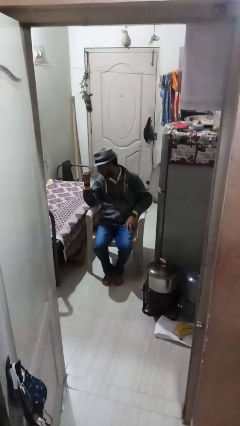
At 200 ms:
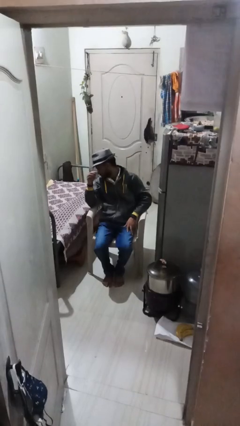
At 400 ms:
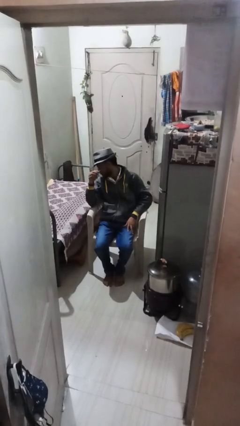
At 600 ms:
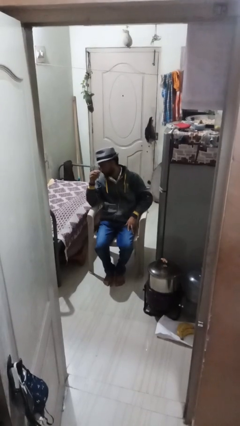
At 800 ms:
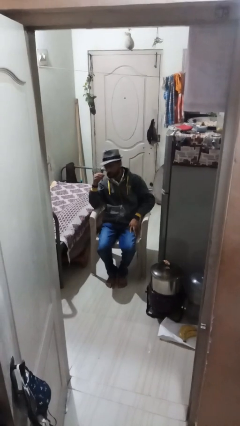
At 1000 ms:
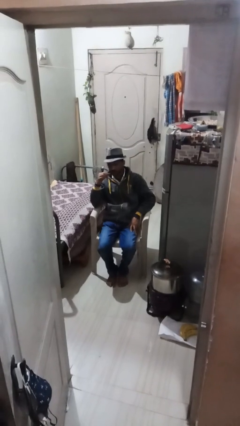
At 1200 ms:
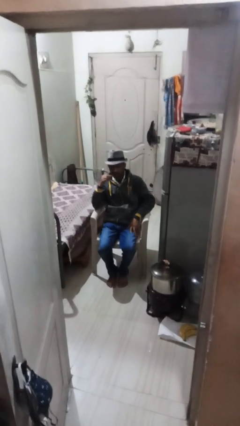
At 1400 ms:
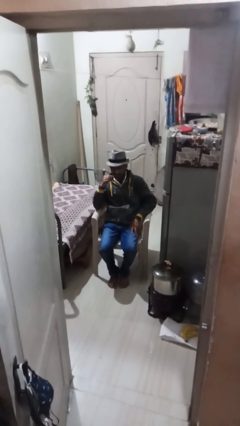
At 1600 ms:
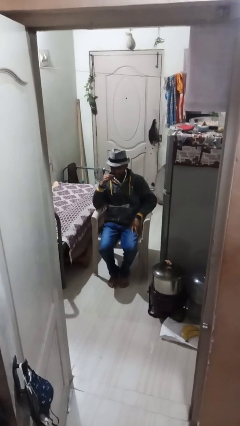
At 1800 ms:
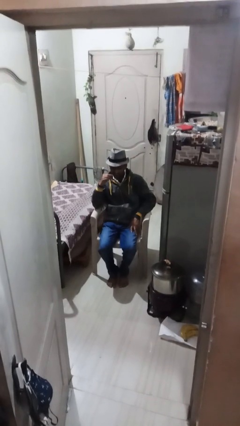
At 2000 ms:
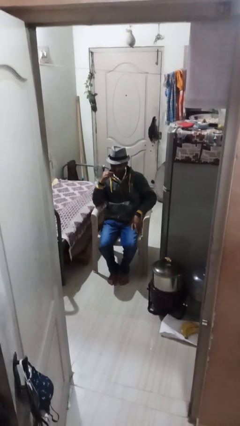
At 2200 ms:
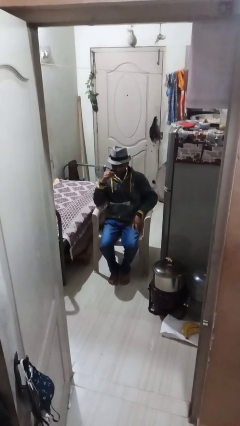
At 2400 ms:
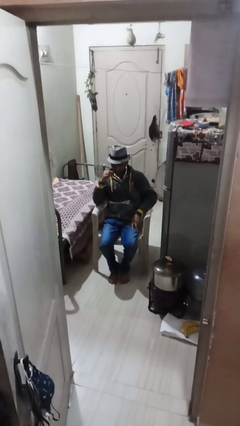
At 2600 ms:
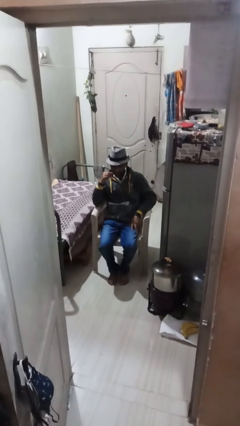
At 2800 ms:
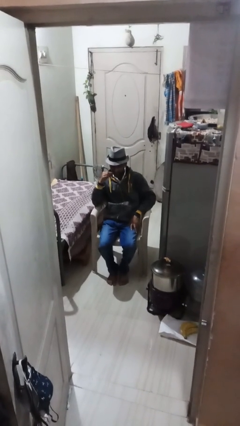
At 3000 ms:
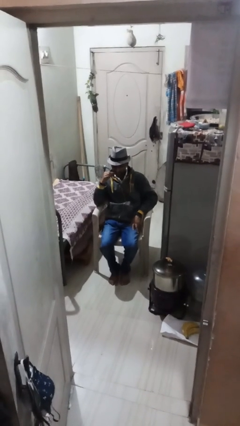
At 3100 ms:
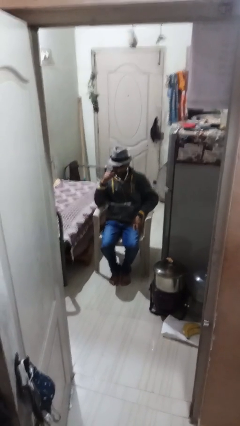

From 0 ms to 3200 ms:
person flosses

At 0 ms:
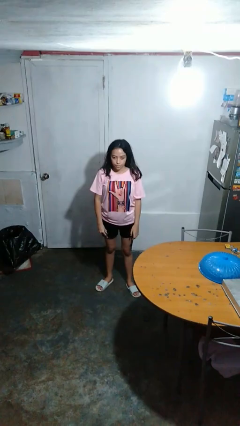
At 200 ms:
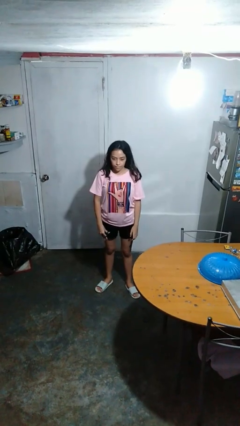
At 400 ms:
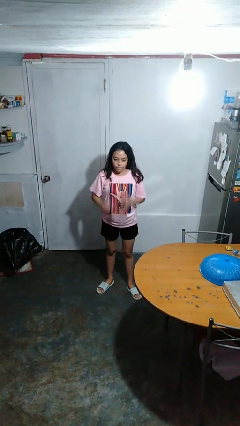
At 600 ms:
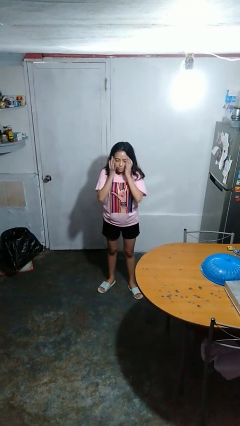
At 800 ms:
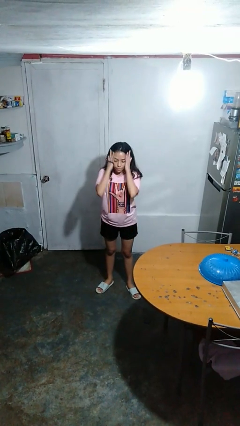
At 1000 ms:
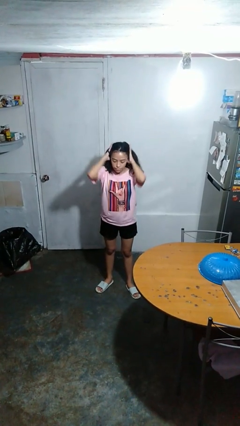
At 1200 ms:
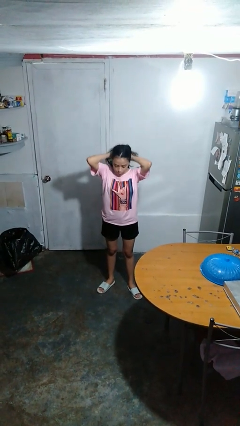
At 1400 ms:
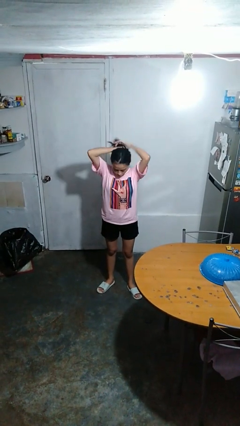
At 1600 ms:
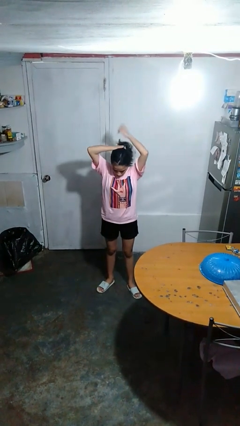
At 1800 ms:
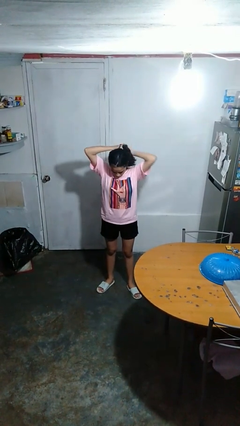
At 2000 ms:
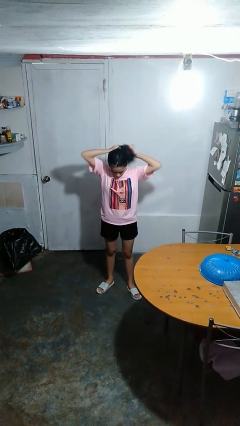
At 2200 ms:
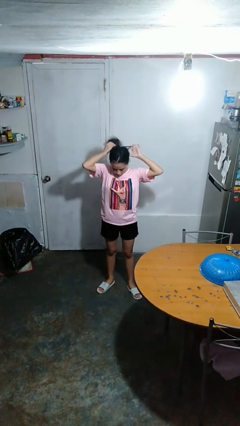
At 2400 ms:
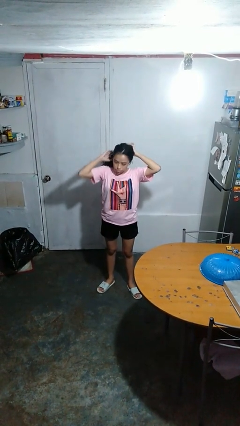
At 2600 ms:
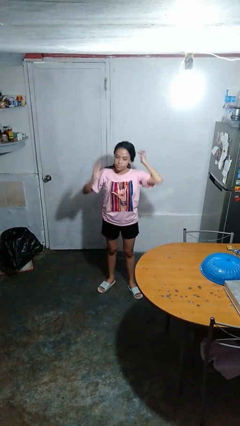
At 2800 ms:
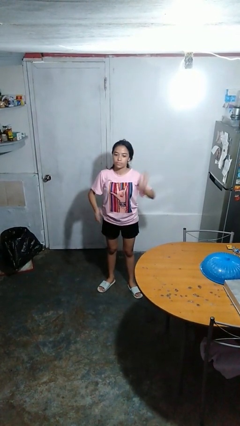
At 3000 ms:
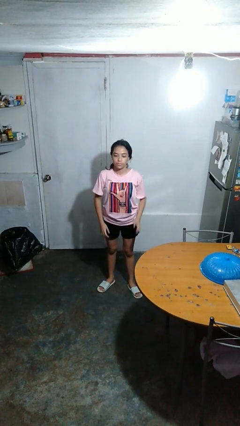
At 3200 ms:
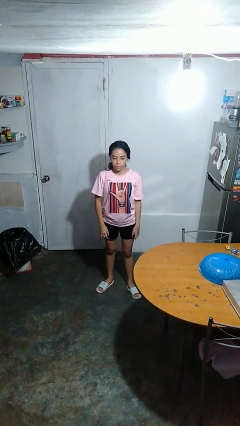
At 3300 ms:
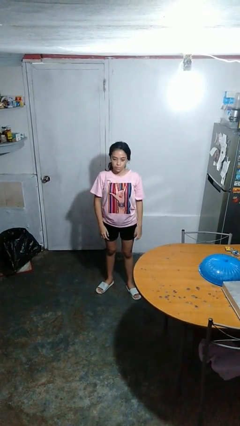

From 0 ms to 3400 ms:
person puts hair in ponytail

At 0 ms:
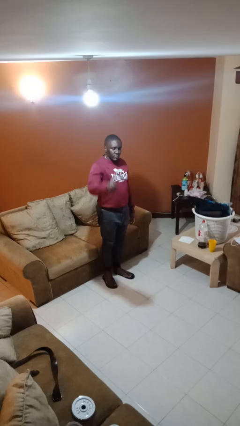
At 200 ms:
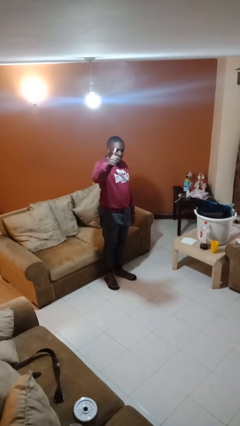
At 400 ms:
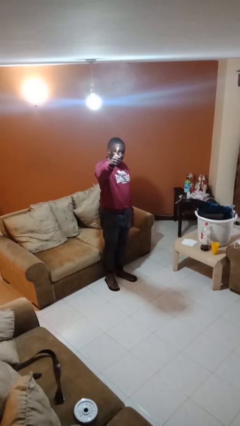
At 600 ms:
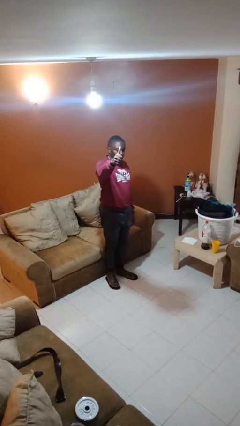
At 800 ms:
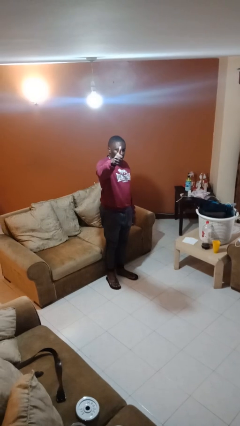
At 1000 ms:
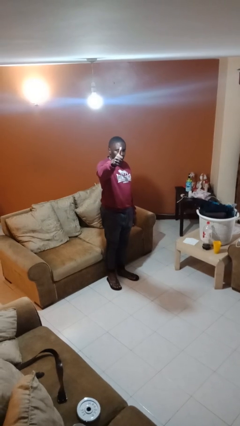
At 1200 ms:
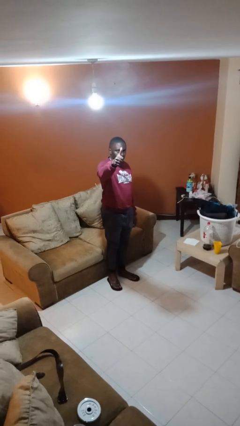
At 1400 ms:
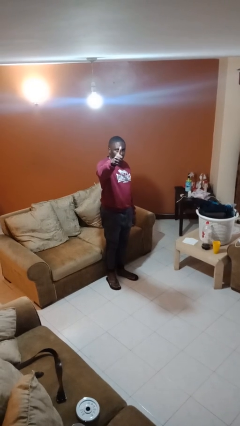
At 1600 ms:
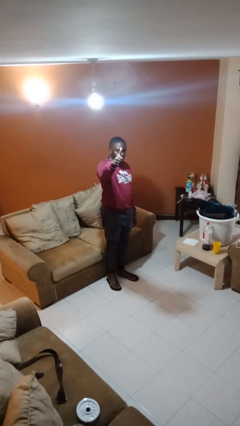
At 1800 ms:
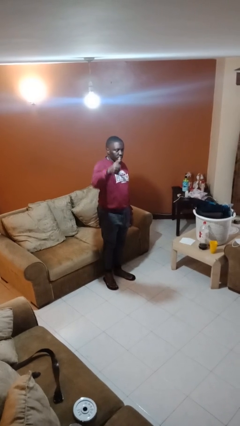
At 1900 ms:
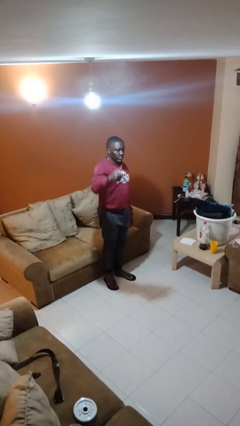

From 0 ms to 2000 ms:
person gestures thumbs up

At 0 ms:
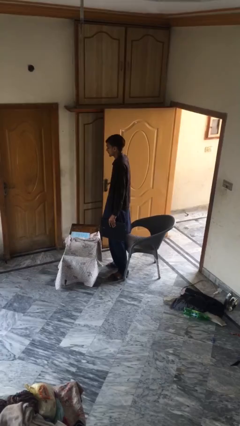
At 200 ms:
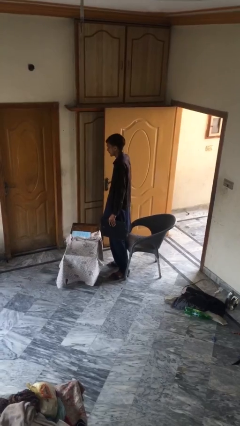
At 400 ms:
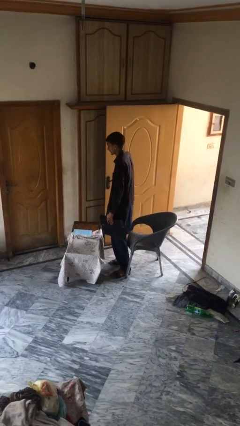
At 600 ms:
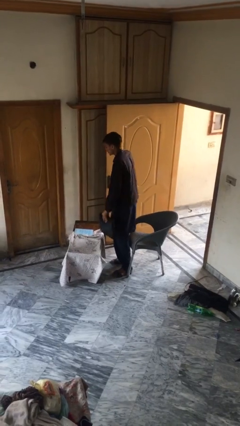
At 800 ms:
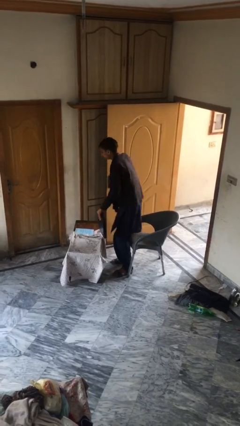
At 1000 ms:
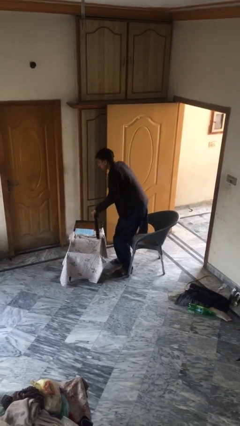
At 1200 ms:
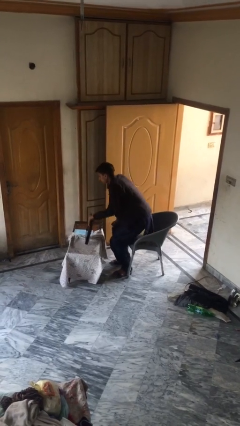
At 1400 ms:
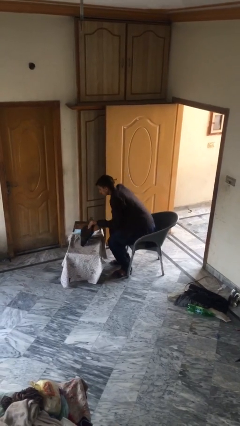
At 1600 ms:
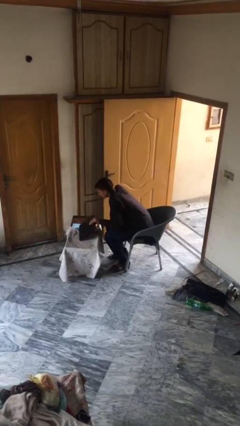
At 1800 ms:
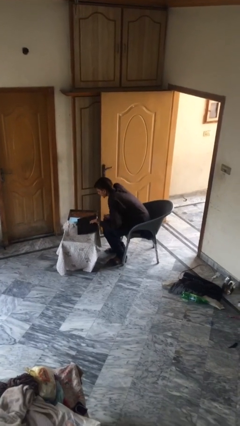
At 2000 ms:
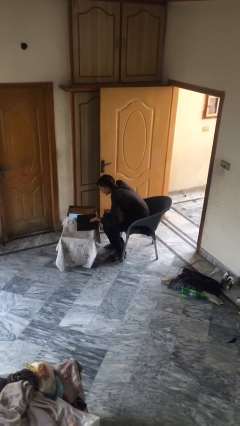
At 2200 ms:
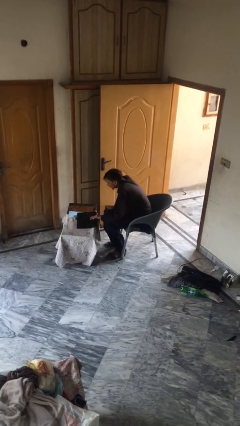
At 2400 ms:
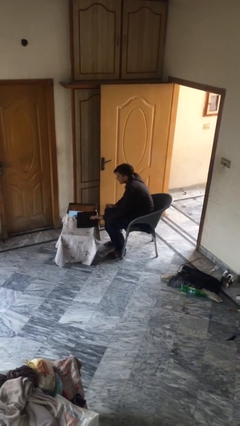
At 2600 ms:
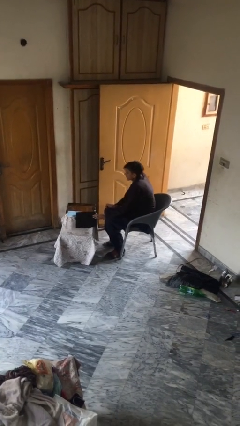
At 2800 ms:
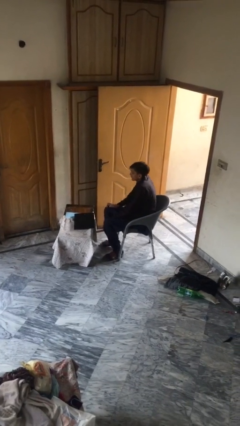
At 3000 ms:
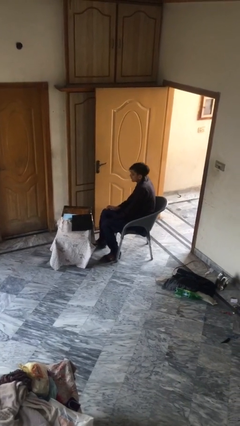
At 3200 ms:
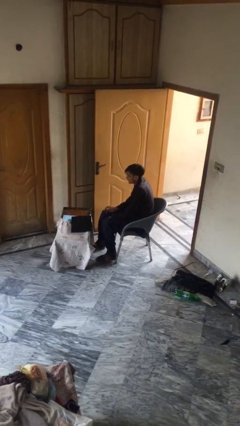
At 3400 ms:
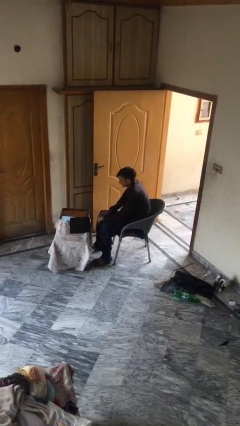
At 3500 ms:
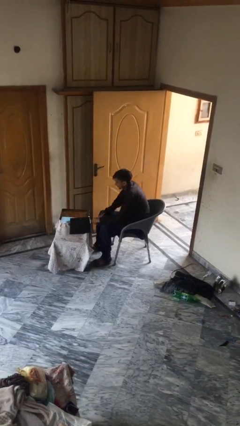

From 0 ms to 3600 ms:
person sits down

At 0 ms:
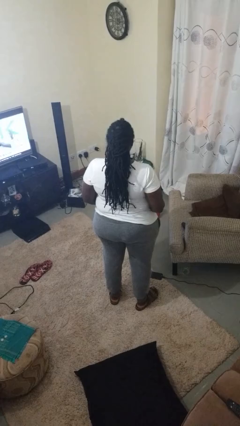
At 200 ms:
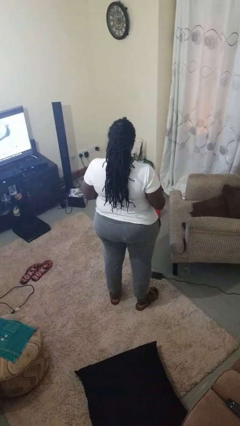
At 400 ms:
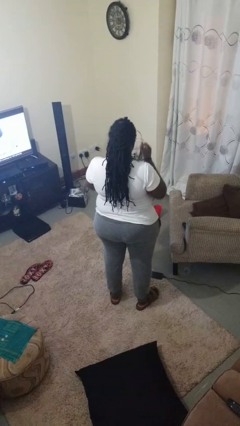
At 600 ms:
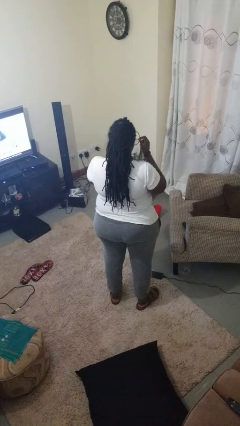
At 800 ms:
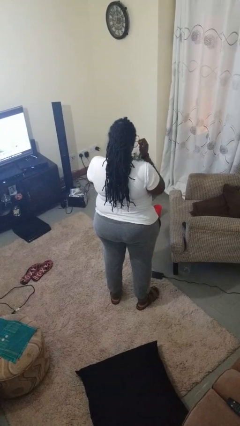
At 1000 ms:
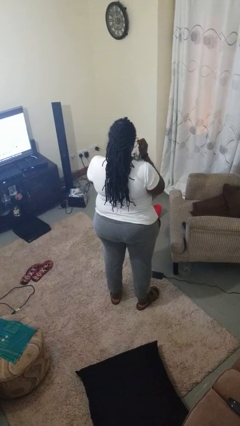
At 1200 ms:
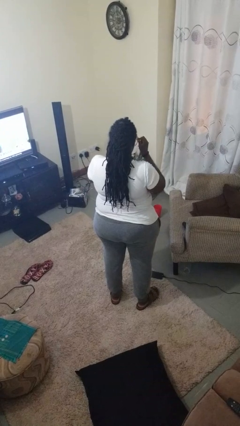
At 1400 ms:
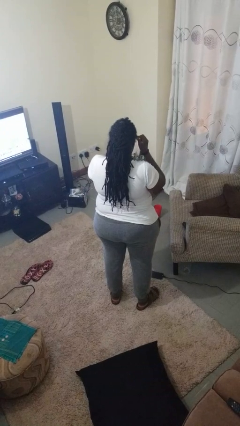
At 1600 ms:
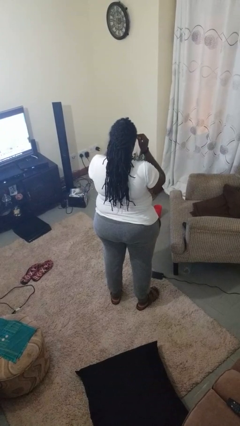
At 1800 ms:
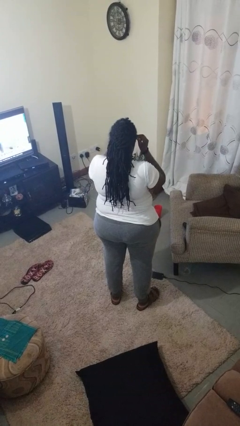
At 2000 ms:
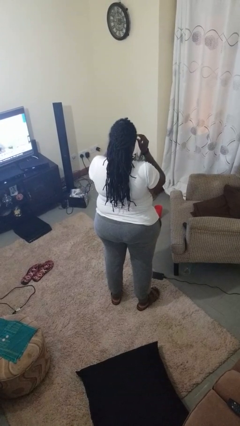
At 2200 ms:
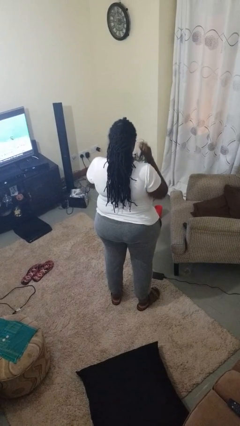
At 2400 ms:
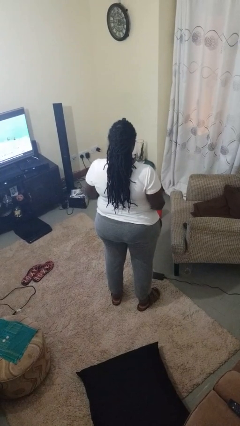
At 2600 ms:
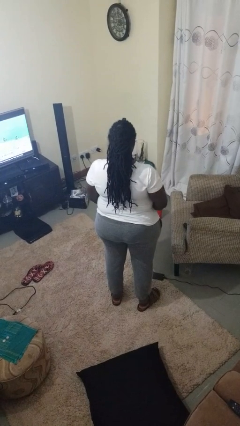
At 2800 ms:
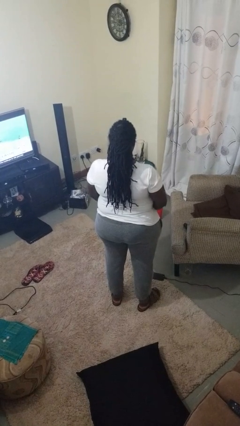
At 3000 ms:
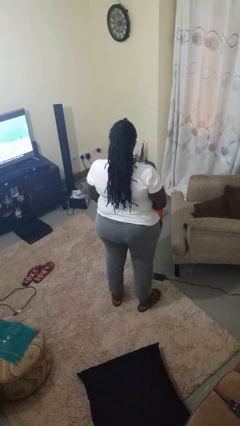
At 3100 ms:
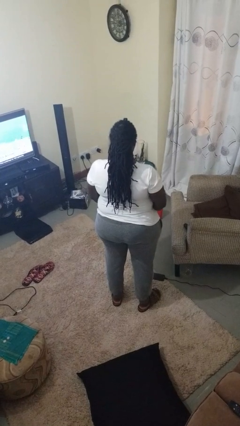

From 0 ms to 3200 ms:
person puts on sunglasses

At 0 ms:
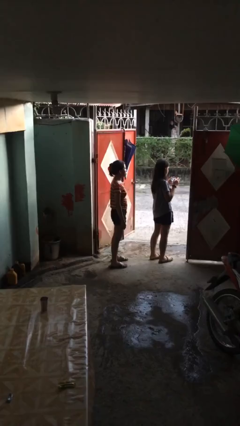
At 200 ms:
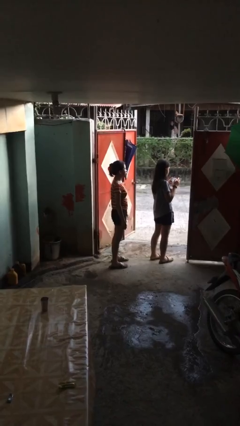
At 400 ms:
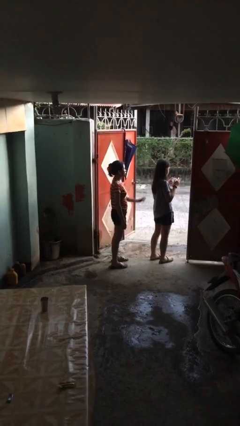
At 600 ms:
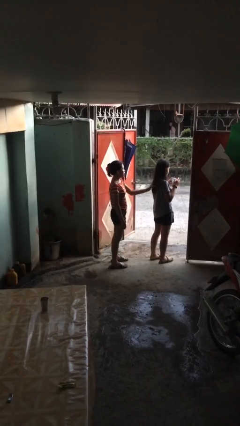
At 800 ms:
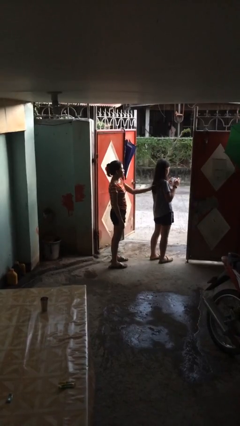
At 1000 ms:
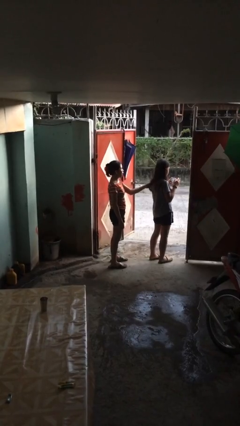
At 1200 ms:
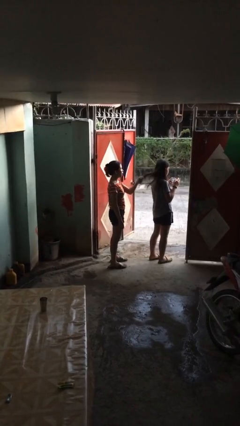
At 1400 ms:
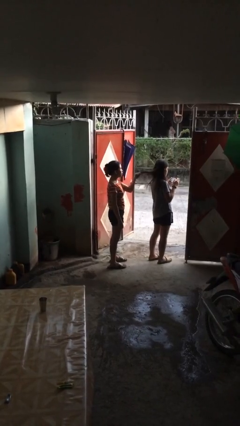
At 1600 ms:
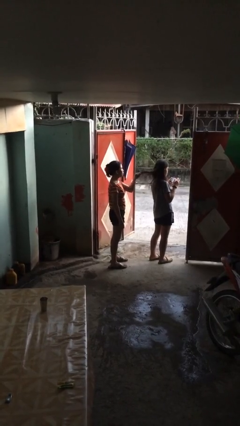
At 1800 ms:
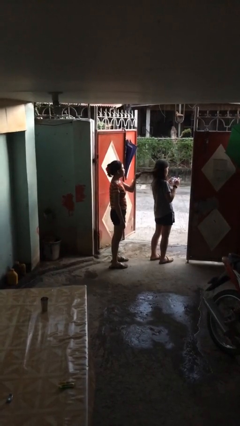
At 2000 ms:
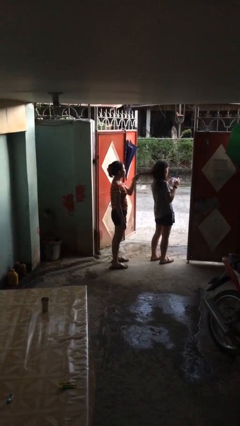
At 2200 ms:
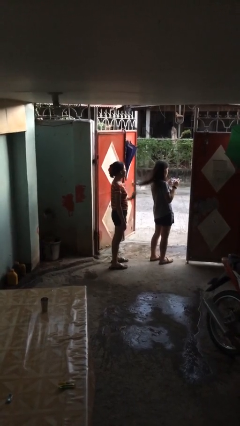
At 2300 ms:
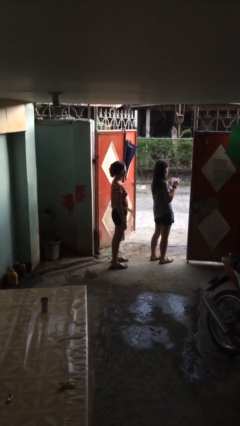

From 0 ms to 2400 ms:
person grabs person by hair
